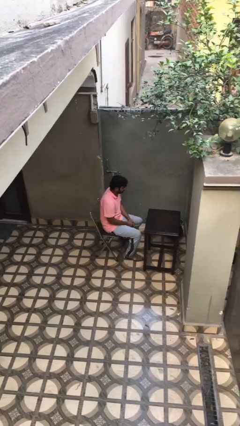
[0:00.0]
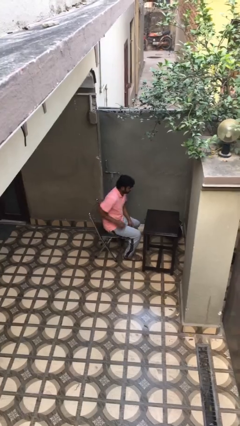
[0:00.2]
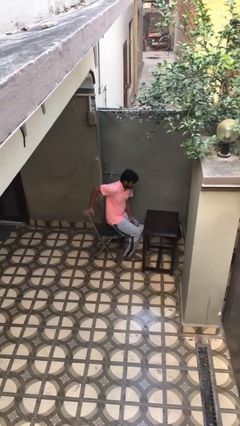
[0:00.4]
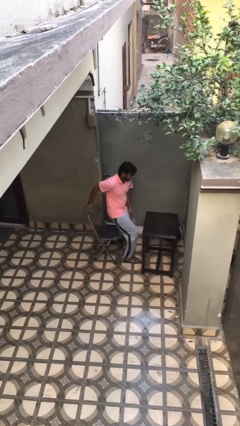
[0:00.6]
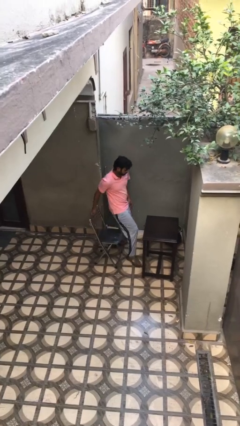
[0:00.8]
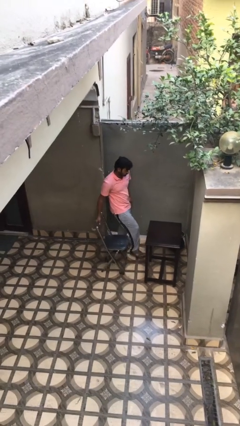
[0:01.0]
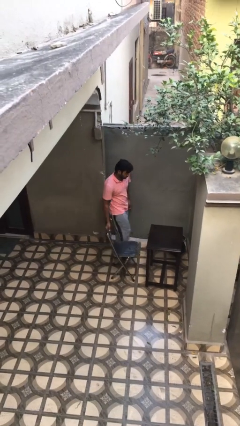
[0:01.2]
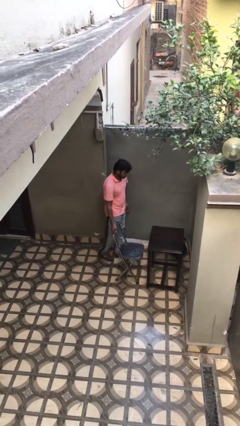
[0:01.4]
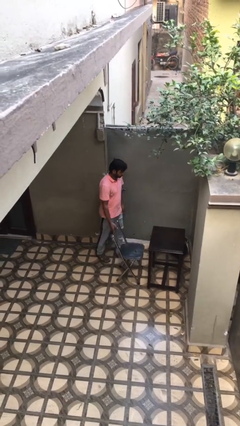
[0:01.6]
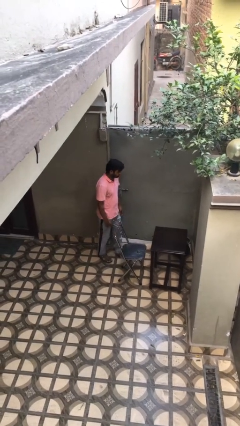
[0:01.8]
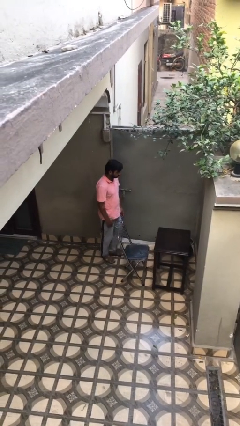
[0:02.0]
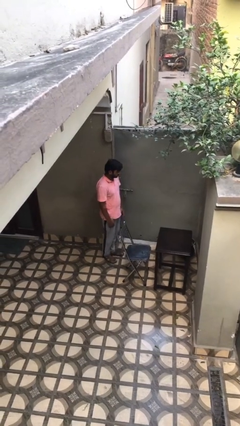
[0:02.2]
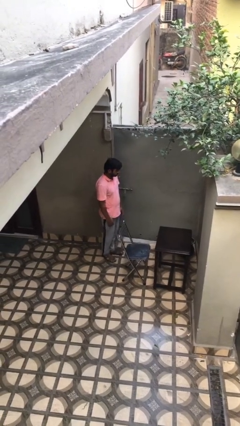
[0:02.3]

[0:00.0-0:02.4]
person stands up

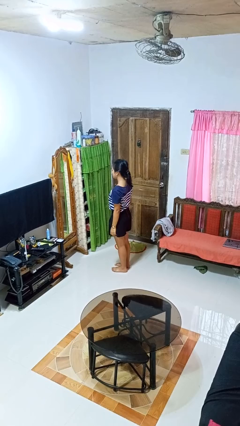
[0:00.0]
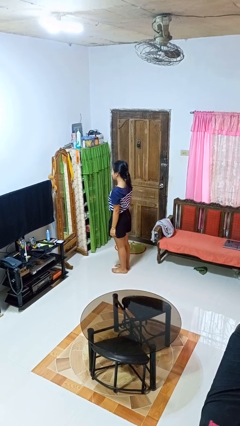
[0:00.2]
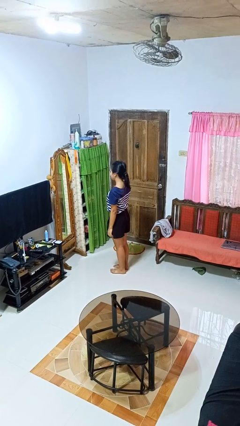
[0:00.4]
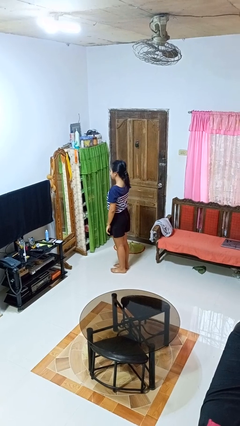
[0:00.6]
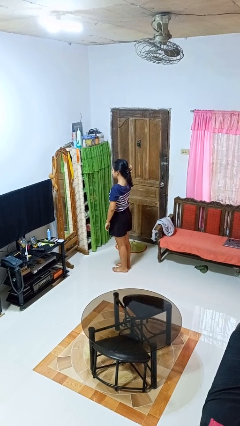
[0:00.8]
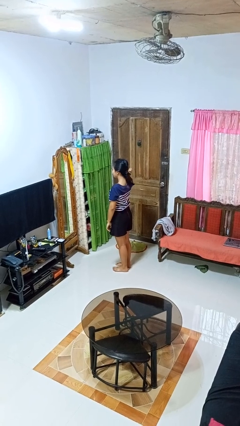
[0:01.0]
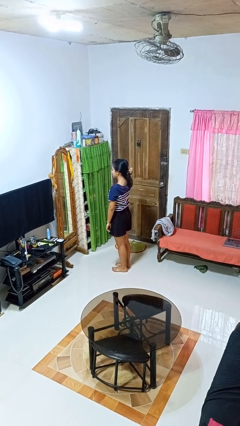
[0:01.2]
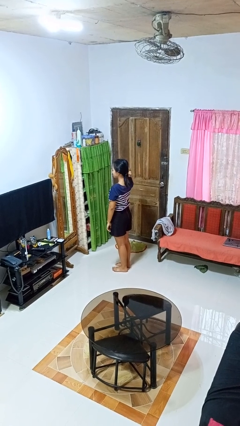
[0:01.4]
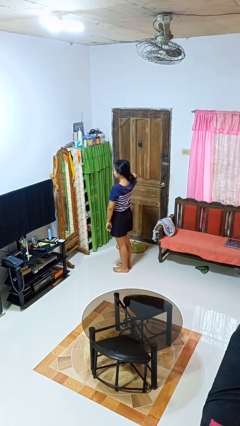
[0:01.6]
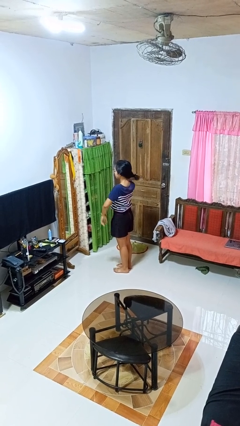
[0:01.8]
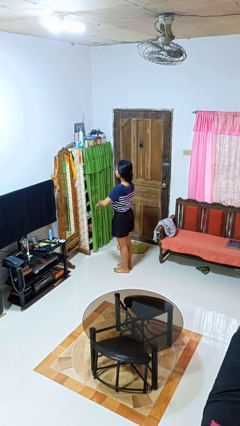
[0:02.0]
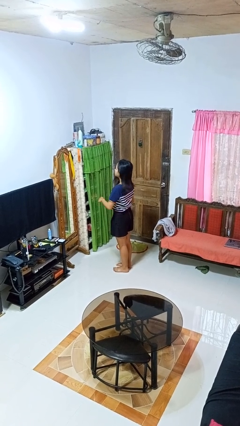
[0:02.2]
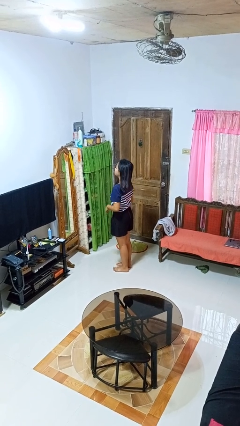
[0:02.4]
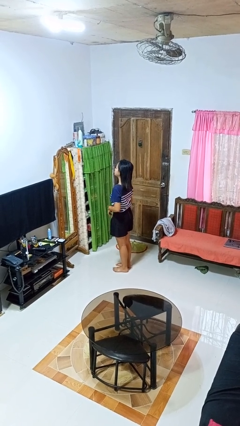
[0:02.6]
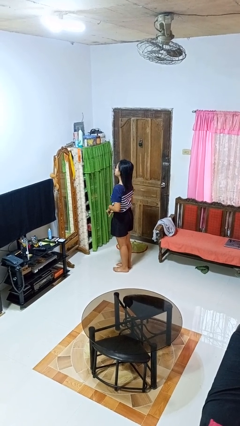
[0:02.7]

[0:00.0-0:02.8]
person takes off hairtie

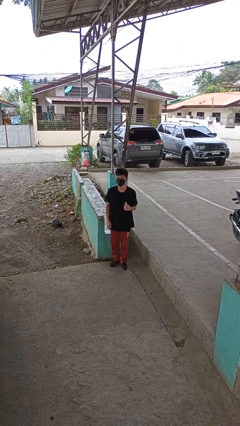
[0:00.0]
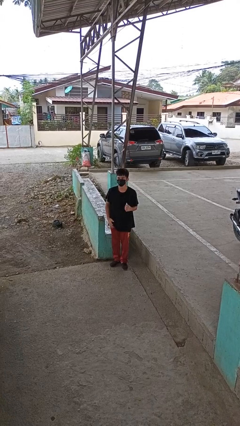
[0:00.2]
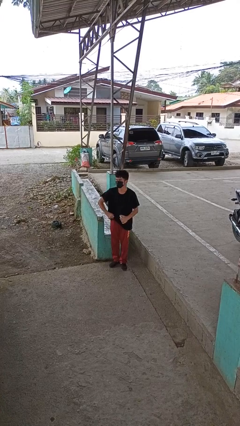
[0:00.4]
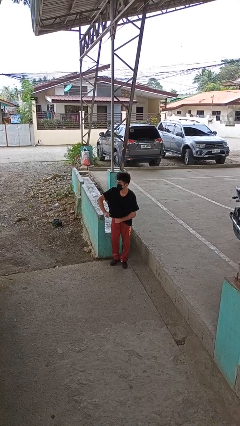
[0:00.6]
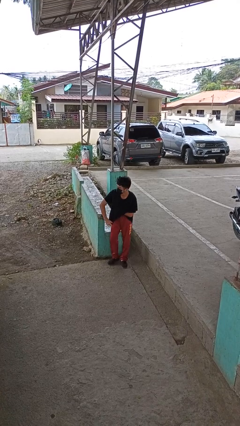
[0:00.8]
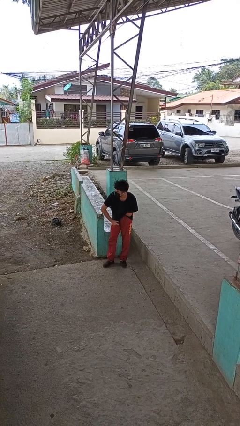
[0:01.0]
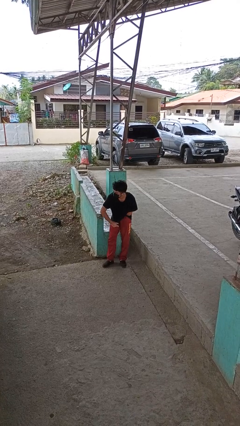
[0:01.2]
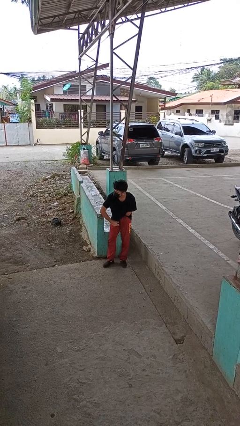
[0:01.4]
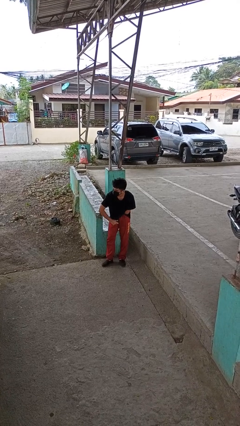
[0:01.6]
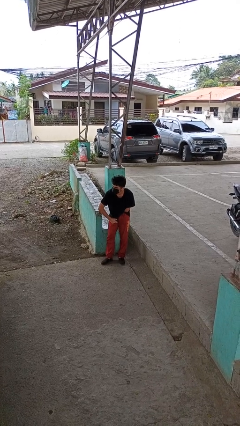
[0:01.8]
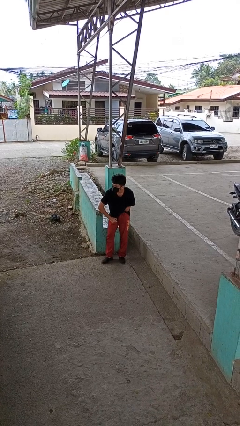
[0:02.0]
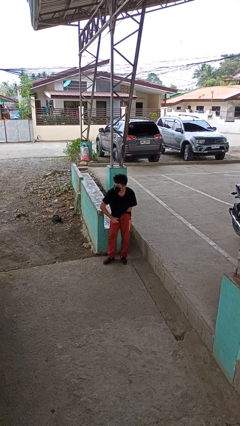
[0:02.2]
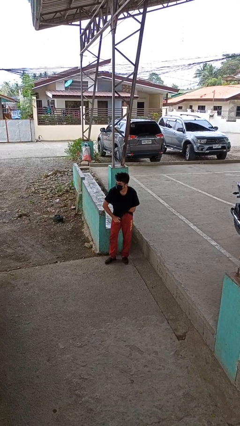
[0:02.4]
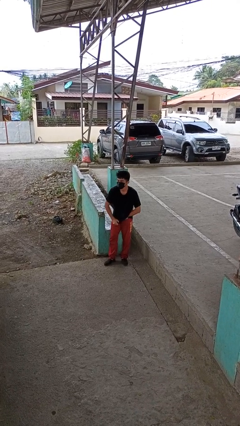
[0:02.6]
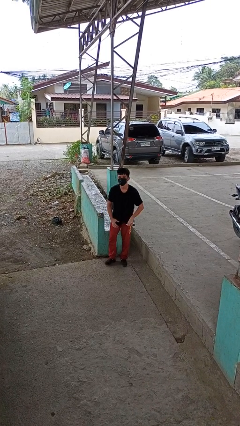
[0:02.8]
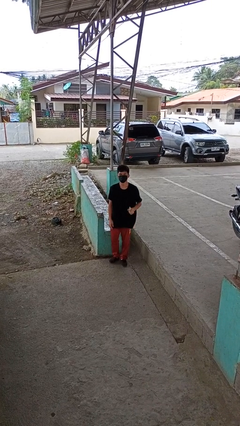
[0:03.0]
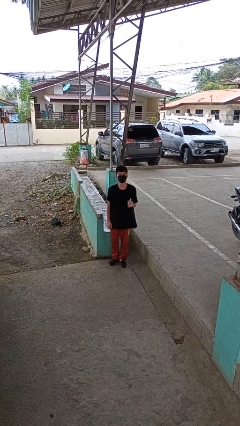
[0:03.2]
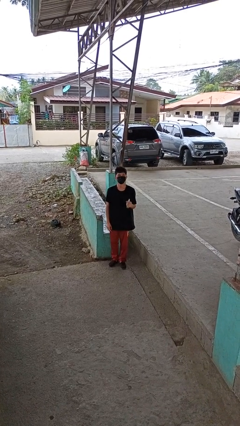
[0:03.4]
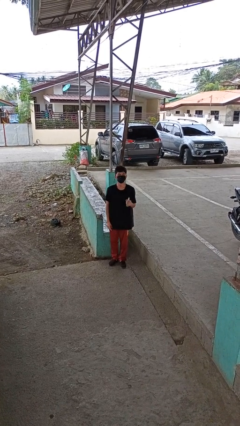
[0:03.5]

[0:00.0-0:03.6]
person applies deodorant

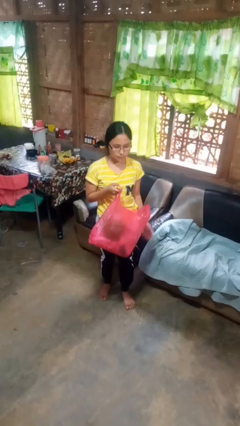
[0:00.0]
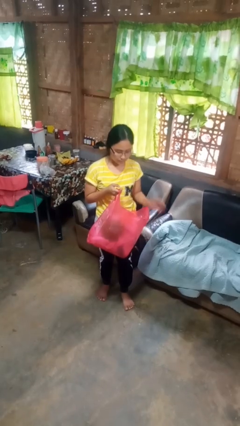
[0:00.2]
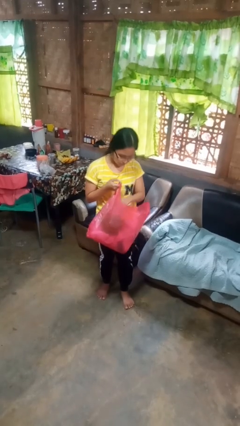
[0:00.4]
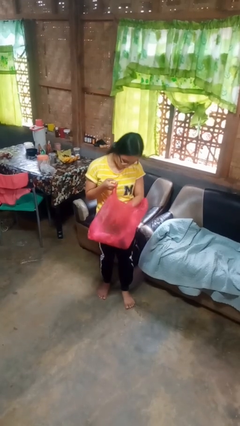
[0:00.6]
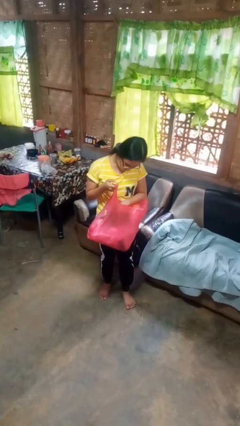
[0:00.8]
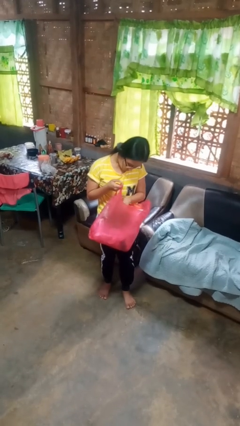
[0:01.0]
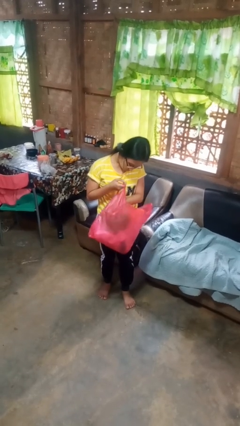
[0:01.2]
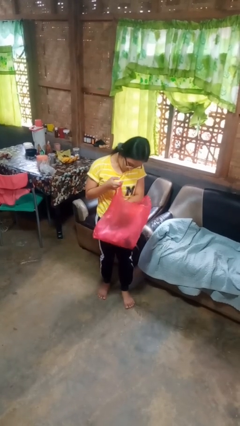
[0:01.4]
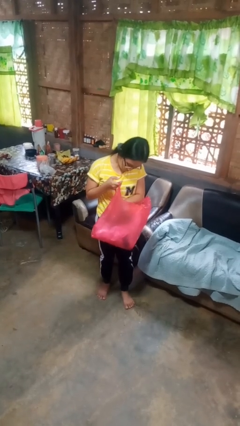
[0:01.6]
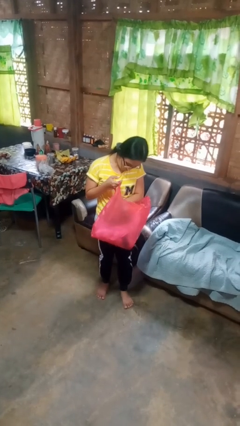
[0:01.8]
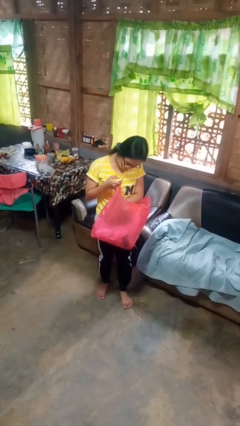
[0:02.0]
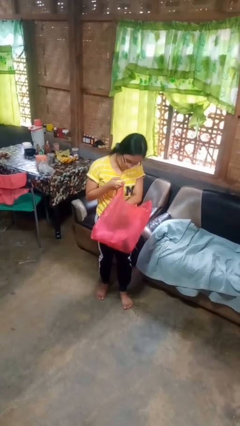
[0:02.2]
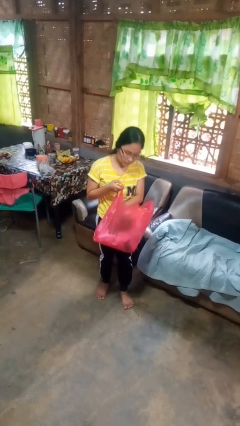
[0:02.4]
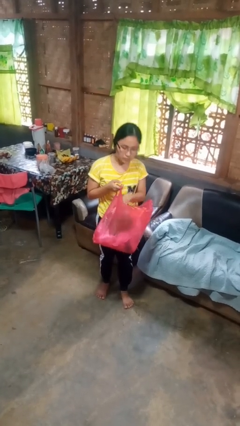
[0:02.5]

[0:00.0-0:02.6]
person searches in bag

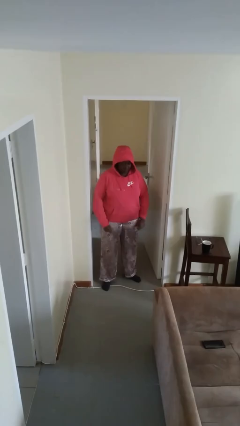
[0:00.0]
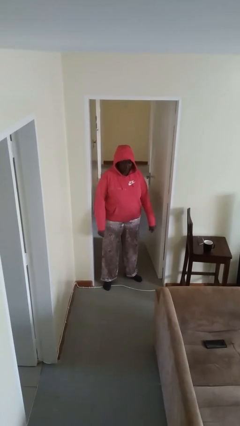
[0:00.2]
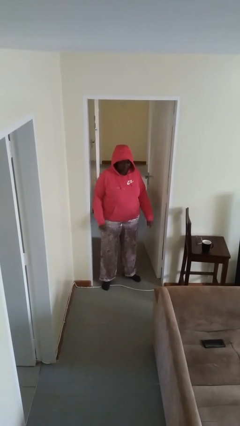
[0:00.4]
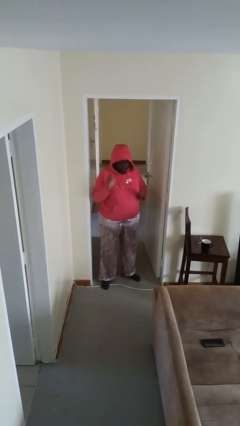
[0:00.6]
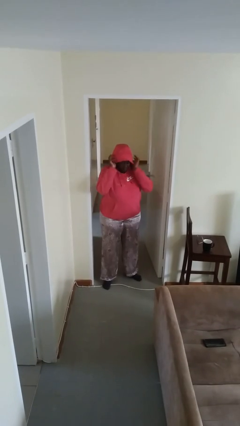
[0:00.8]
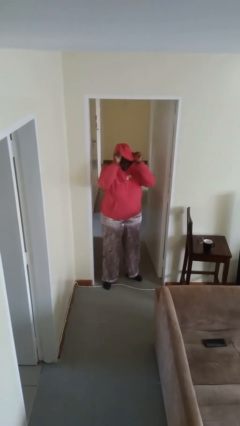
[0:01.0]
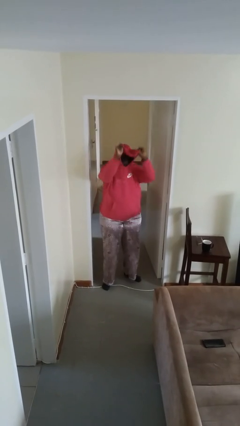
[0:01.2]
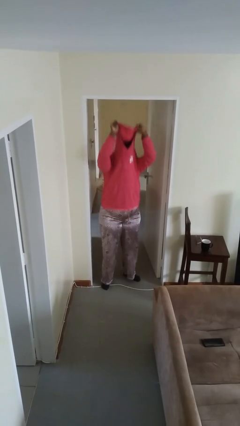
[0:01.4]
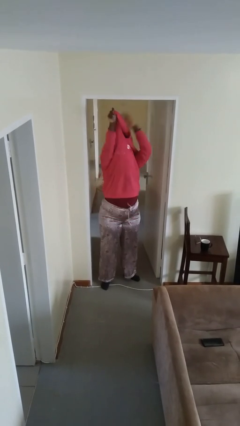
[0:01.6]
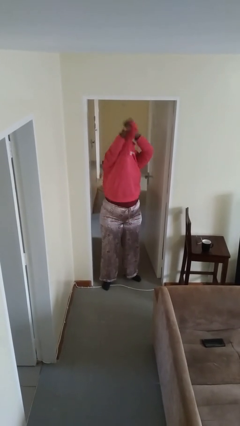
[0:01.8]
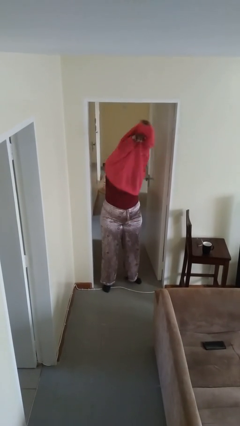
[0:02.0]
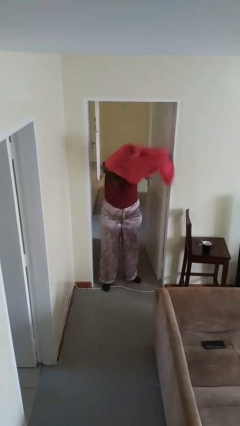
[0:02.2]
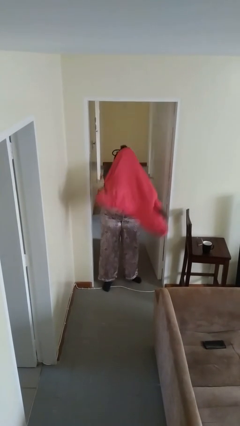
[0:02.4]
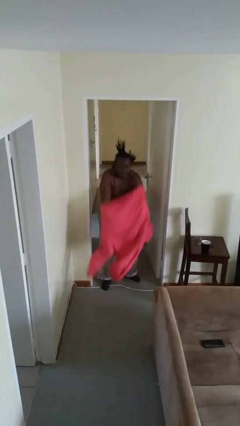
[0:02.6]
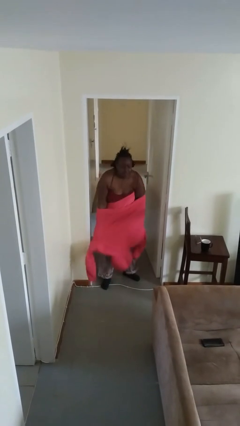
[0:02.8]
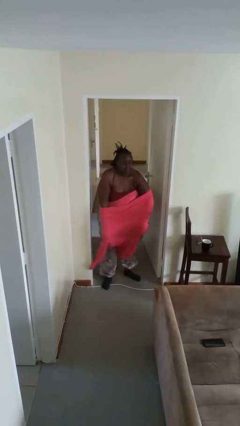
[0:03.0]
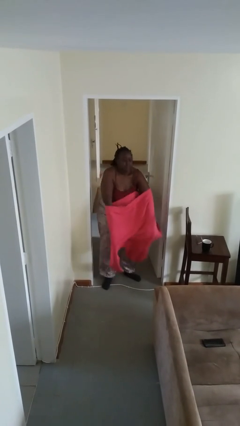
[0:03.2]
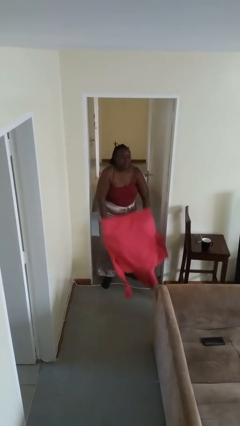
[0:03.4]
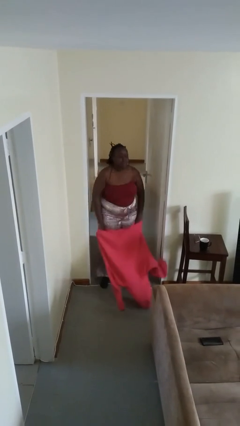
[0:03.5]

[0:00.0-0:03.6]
person takes off hoodie

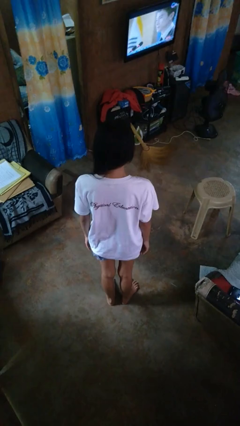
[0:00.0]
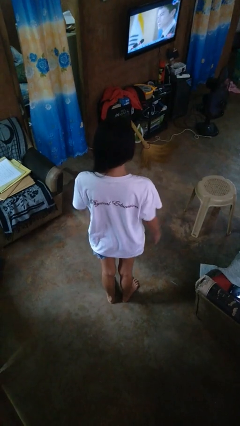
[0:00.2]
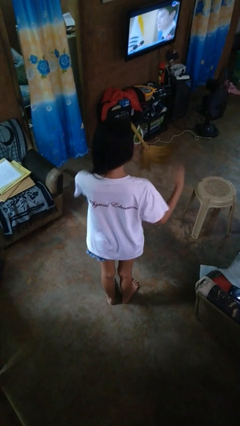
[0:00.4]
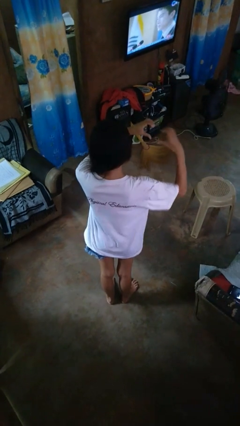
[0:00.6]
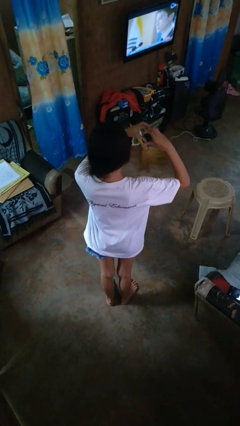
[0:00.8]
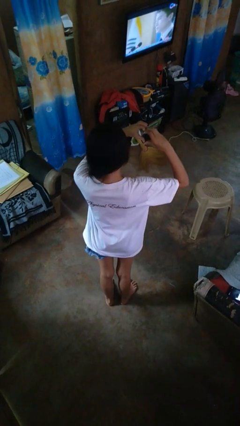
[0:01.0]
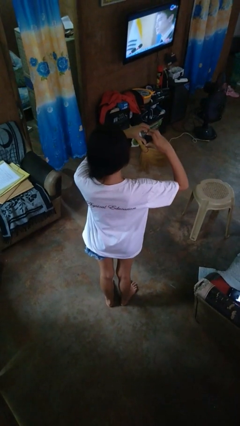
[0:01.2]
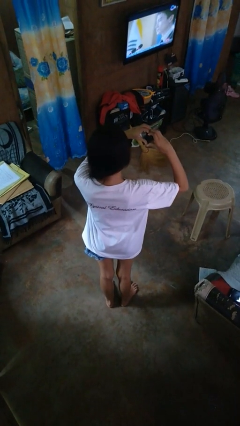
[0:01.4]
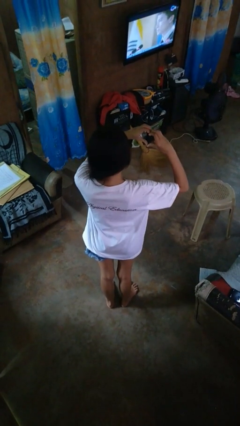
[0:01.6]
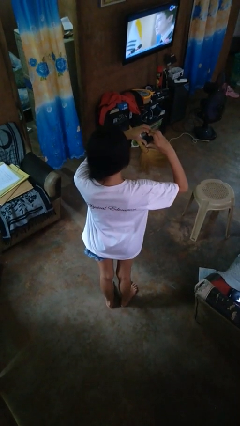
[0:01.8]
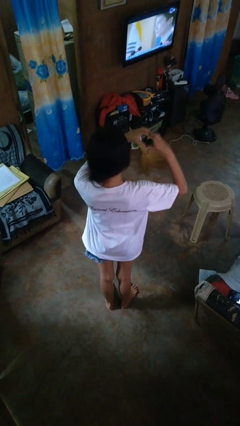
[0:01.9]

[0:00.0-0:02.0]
person gestures heart

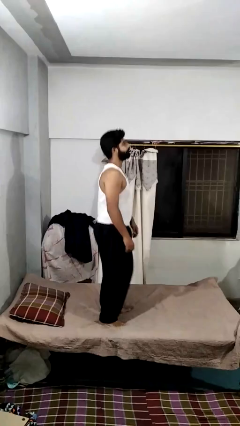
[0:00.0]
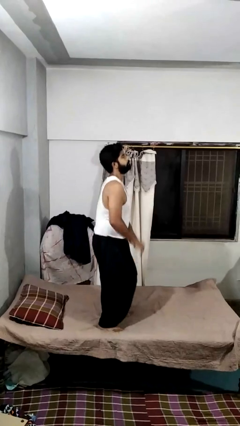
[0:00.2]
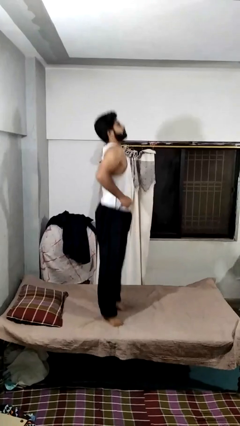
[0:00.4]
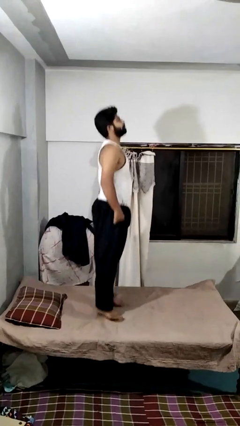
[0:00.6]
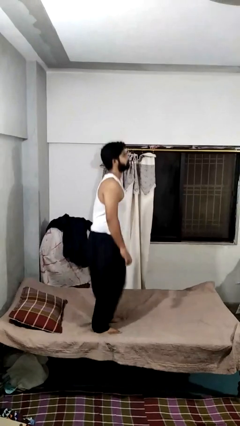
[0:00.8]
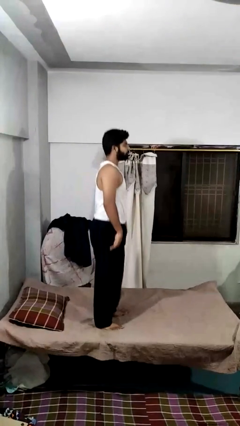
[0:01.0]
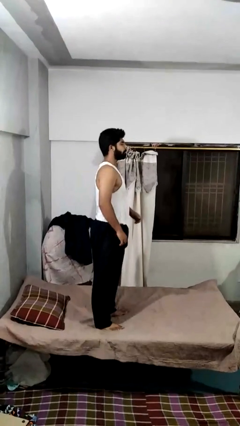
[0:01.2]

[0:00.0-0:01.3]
person jumps on bed
